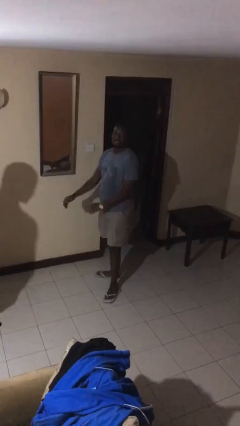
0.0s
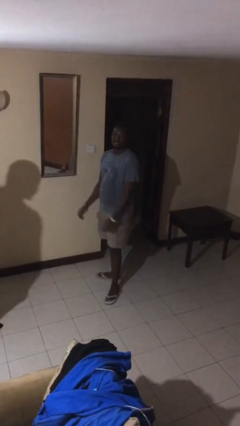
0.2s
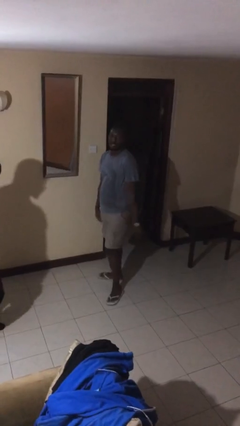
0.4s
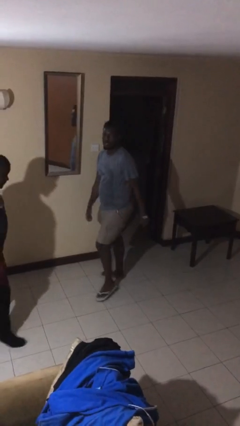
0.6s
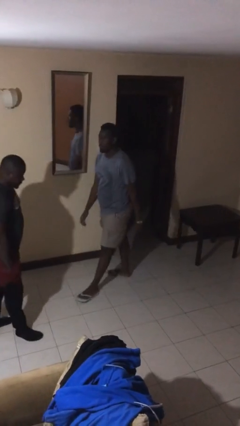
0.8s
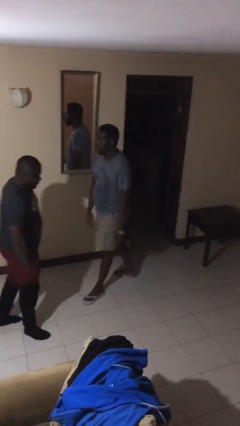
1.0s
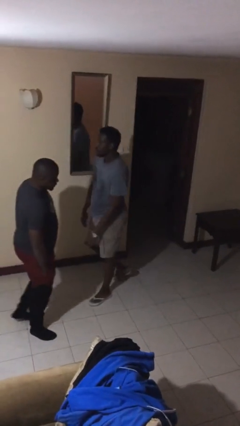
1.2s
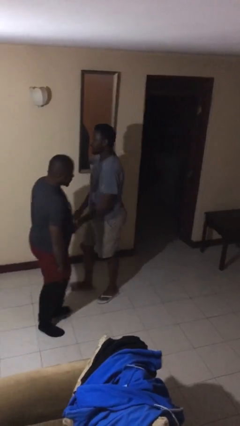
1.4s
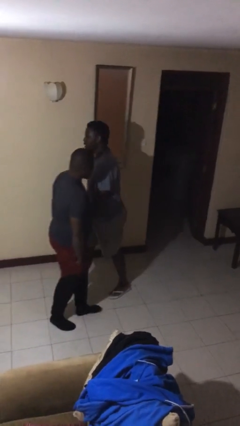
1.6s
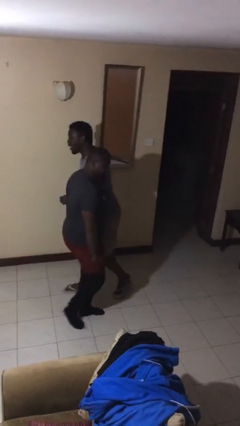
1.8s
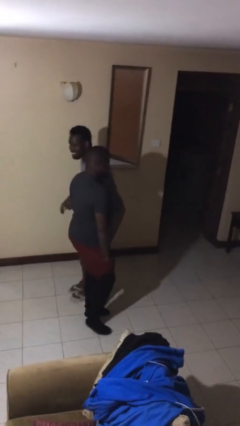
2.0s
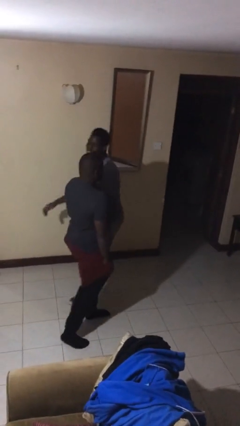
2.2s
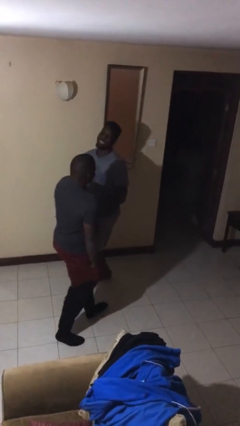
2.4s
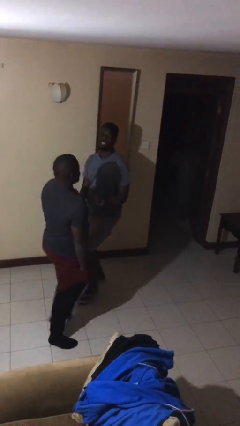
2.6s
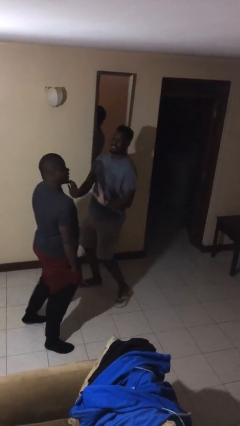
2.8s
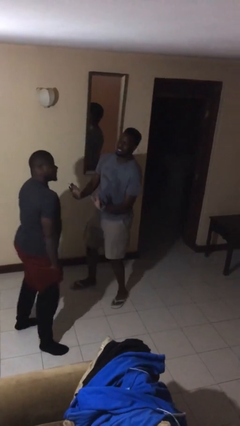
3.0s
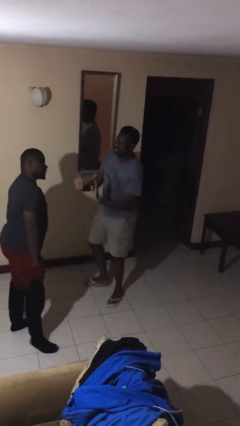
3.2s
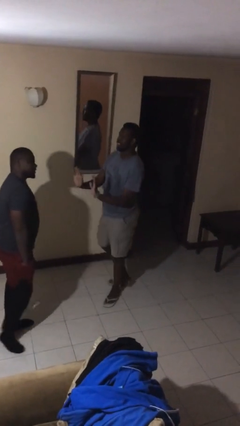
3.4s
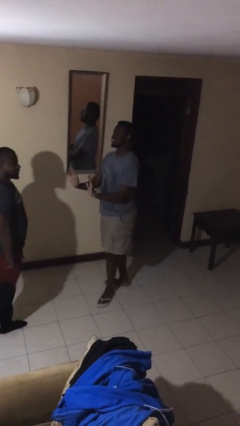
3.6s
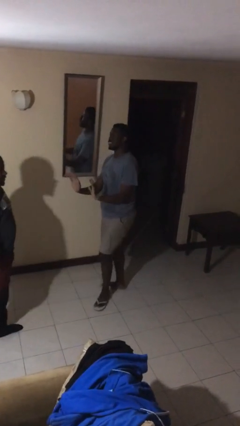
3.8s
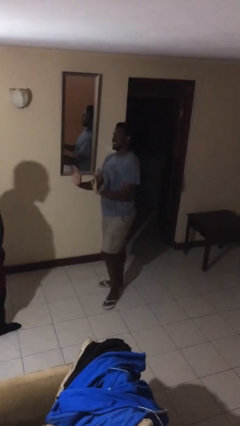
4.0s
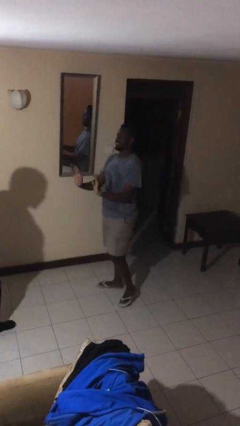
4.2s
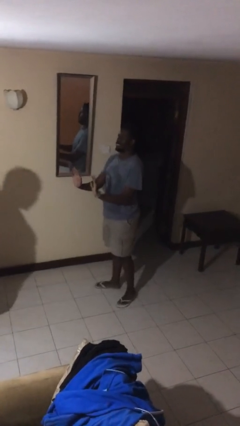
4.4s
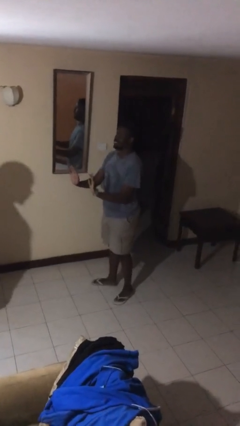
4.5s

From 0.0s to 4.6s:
person bumps into person

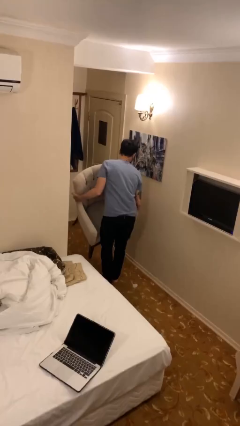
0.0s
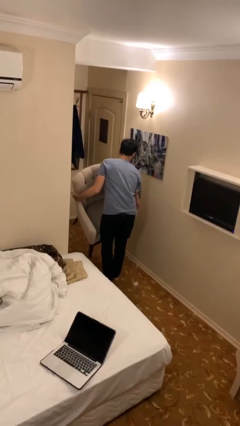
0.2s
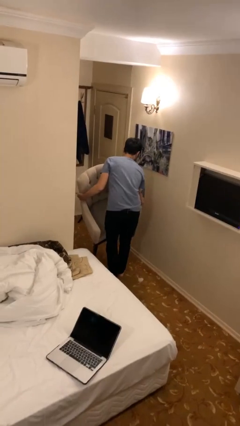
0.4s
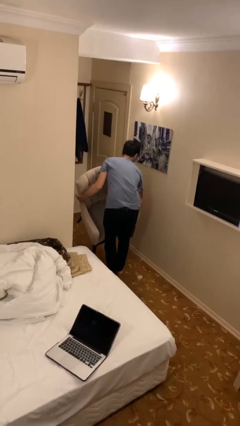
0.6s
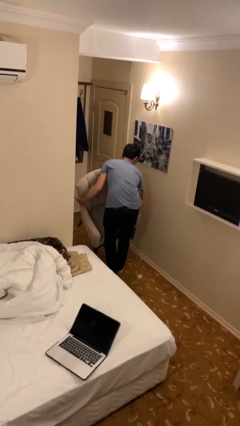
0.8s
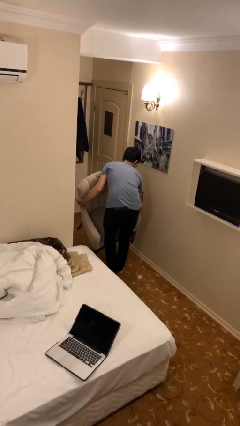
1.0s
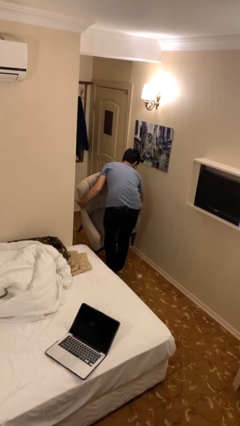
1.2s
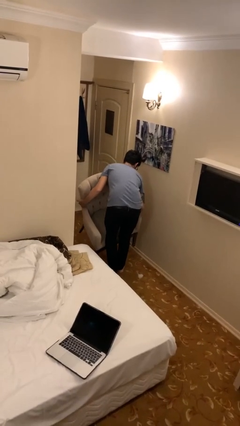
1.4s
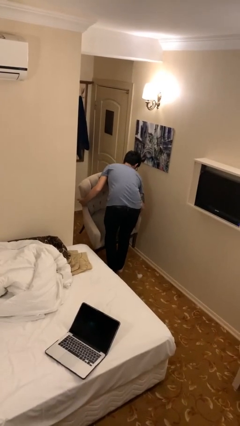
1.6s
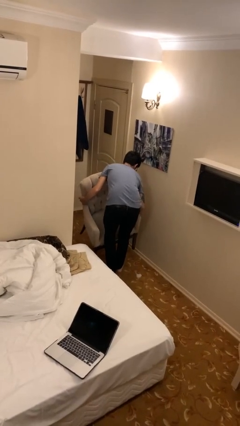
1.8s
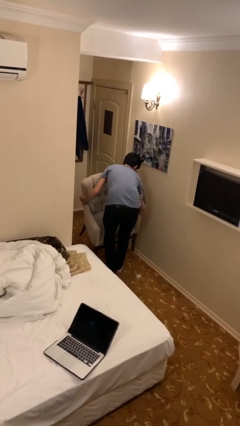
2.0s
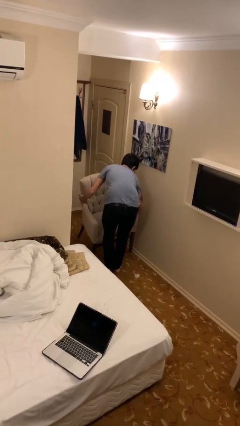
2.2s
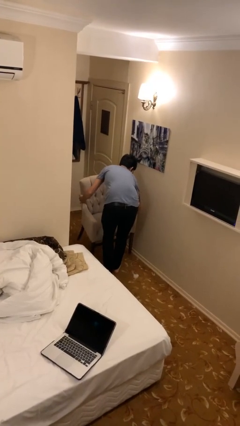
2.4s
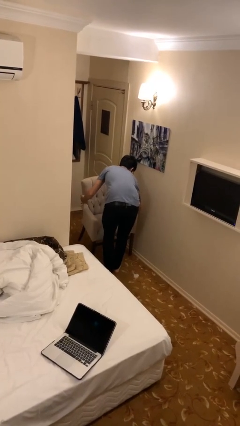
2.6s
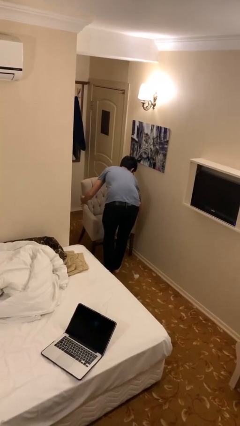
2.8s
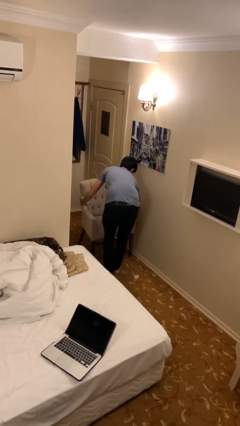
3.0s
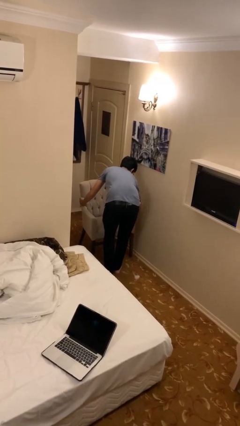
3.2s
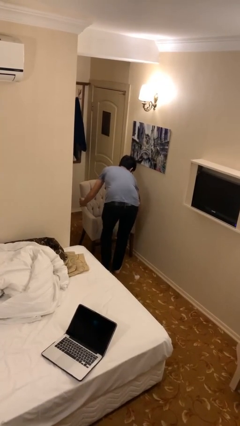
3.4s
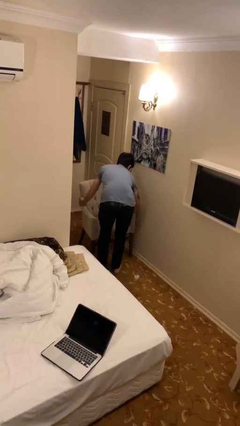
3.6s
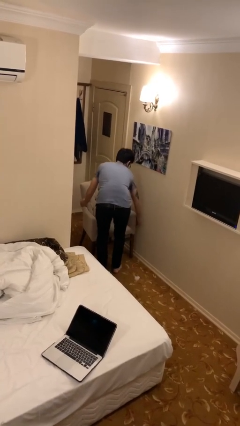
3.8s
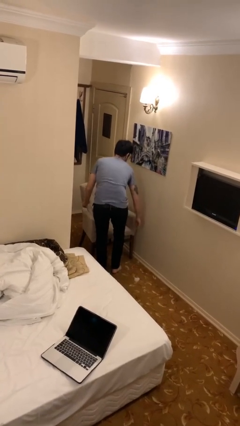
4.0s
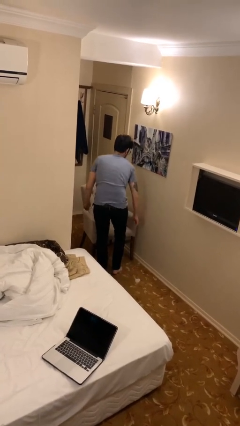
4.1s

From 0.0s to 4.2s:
person puts down object on floor

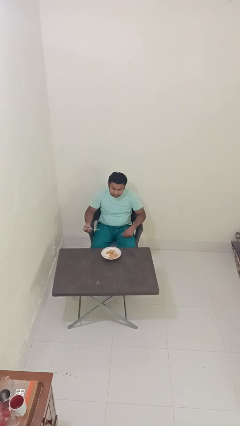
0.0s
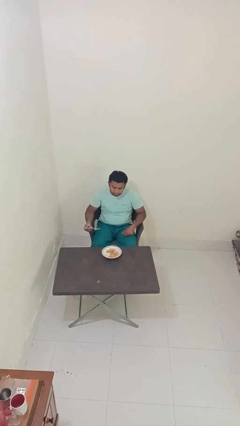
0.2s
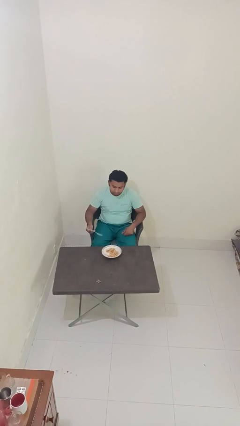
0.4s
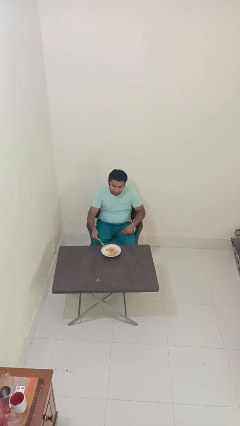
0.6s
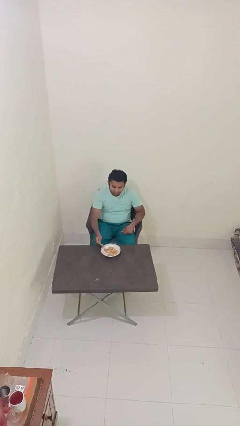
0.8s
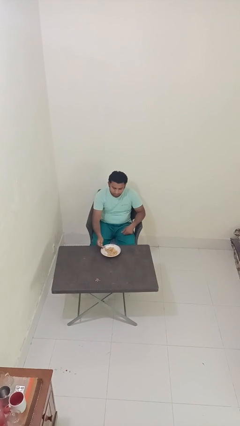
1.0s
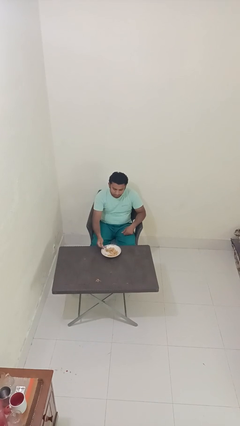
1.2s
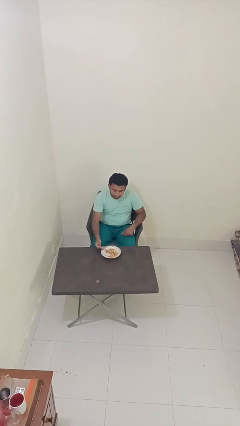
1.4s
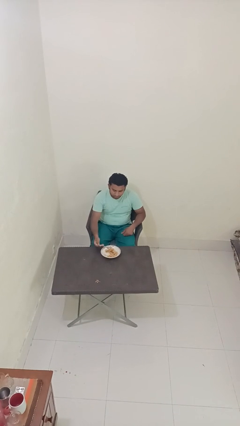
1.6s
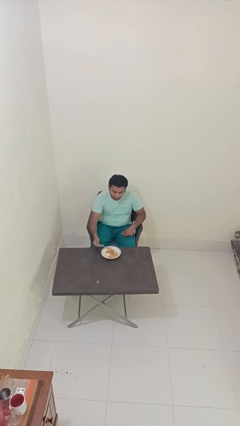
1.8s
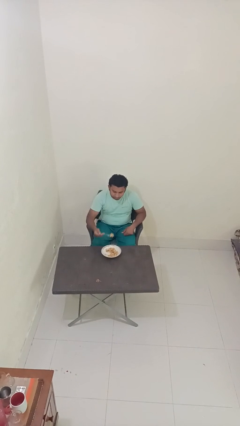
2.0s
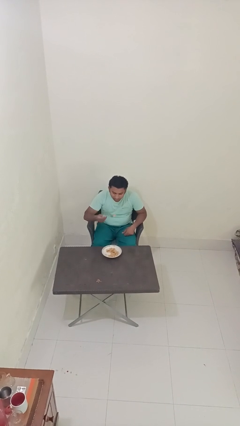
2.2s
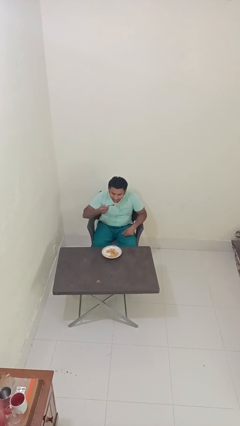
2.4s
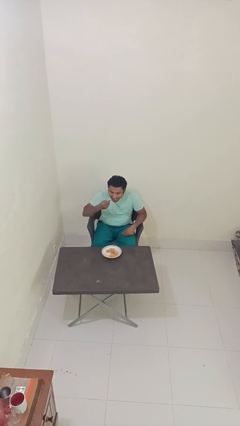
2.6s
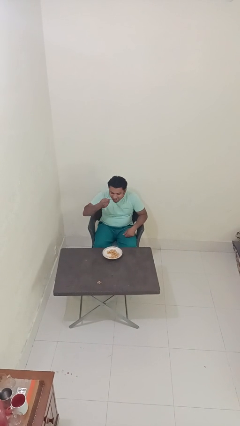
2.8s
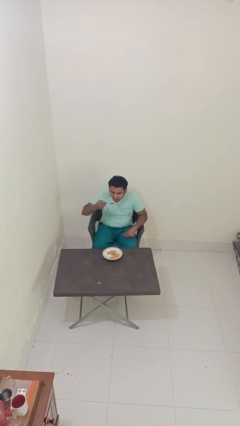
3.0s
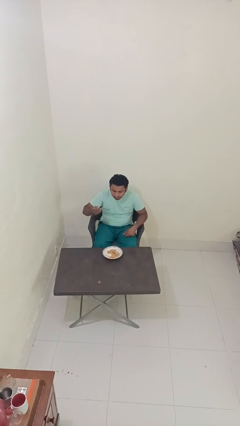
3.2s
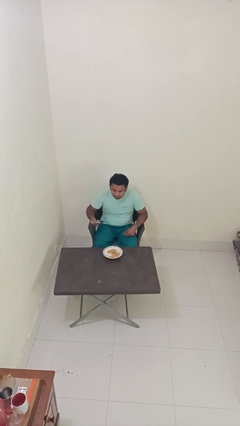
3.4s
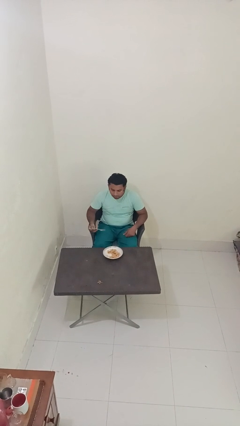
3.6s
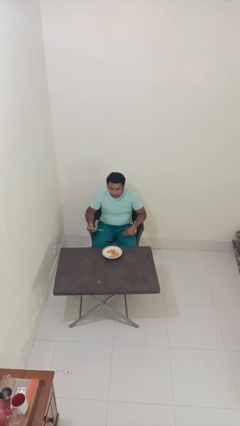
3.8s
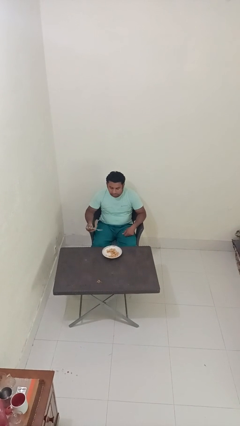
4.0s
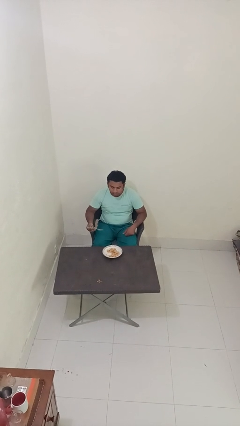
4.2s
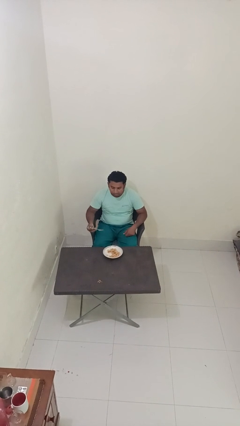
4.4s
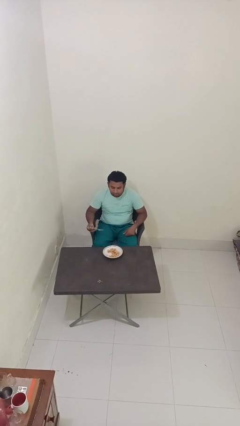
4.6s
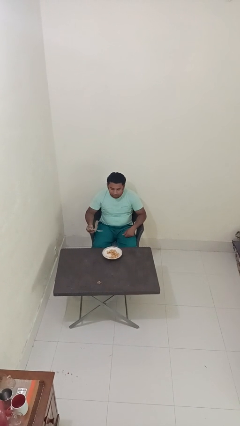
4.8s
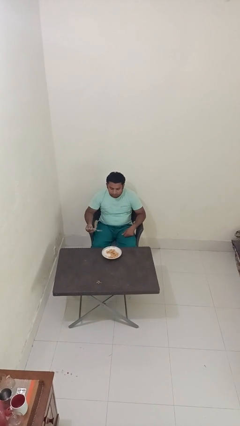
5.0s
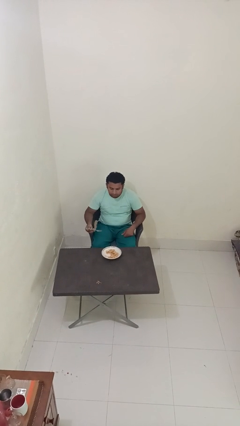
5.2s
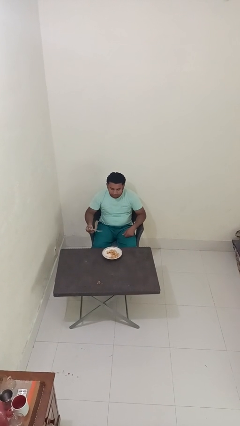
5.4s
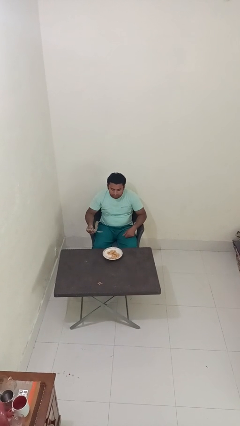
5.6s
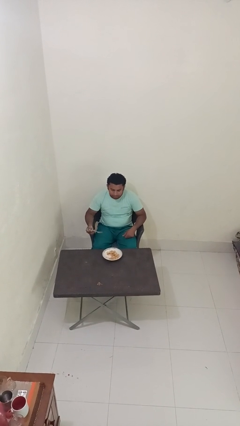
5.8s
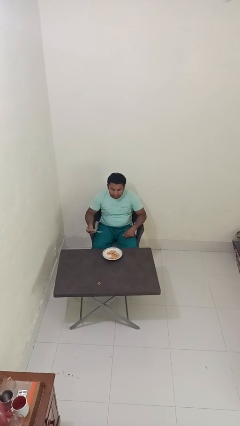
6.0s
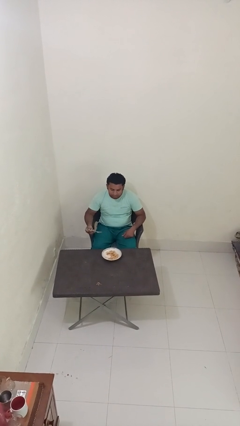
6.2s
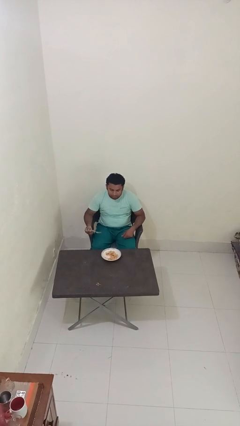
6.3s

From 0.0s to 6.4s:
person eats with utensil

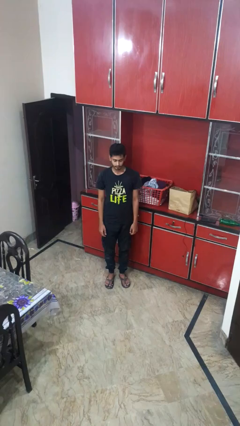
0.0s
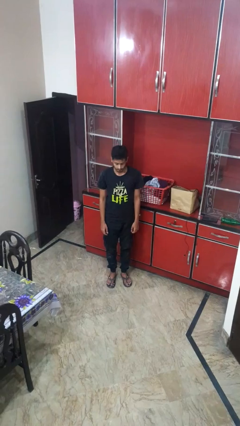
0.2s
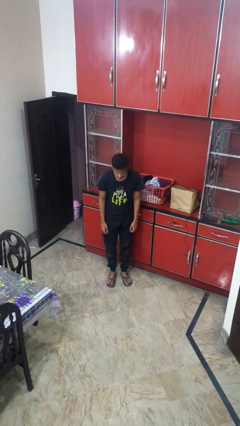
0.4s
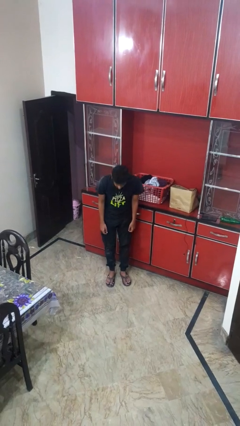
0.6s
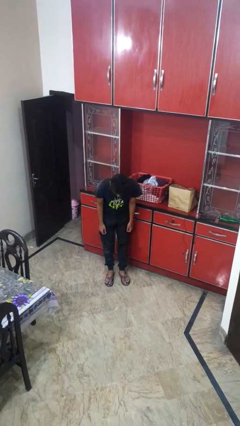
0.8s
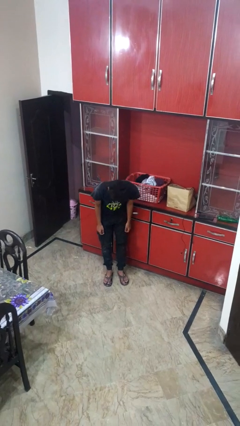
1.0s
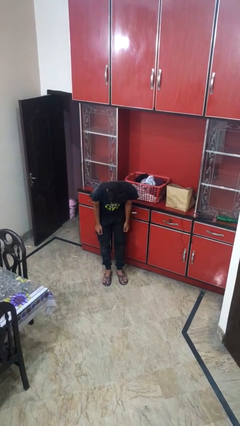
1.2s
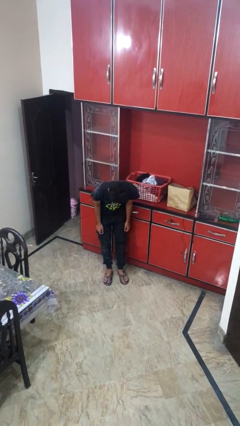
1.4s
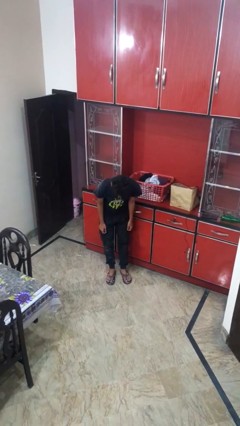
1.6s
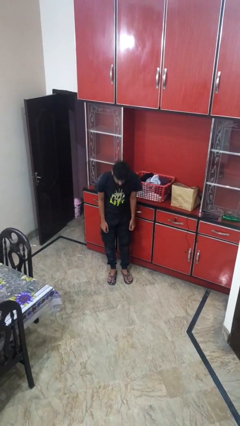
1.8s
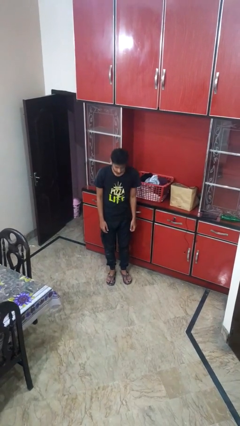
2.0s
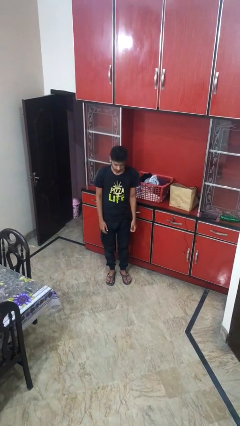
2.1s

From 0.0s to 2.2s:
person bows

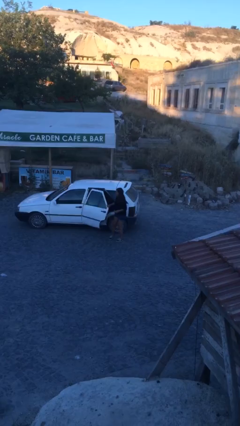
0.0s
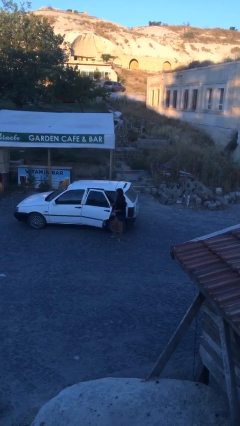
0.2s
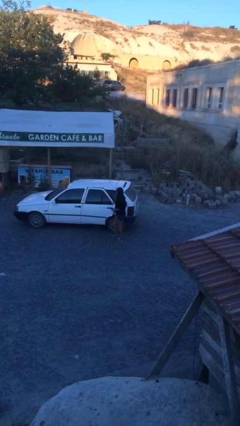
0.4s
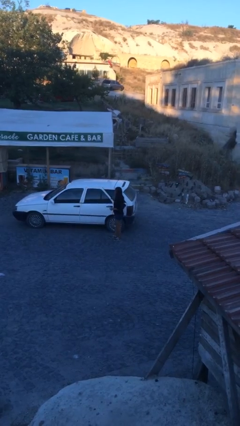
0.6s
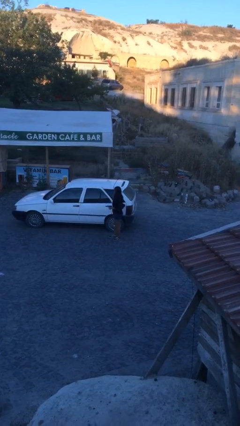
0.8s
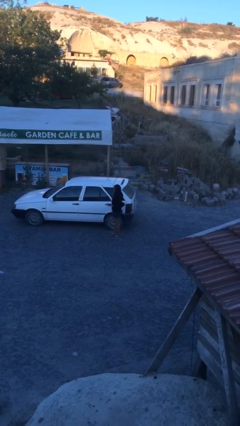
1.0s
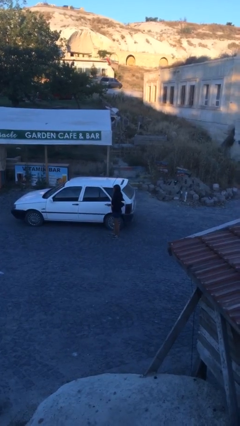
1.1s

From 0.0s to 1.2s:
person closes car door
